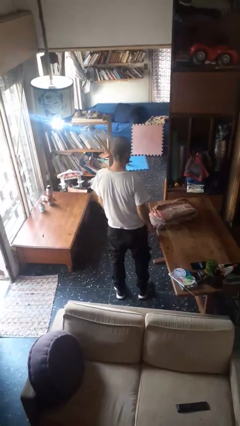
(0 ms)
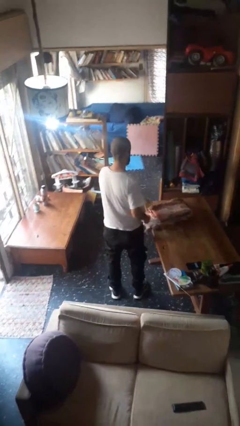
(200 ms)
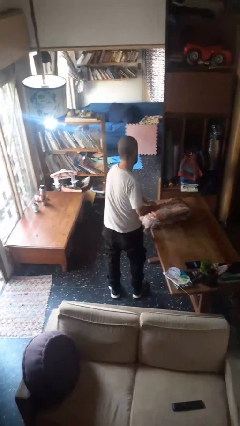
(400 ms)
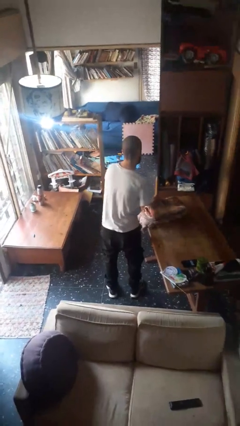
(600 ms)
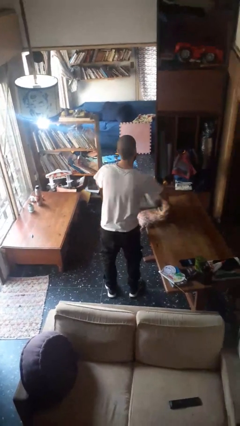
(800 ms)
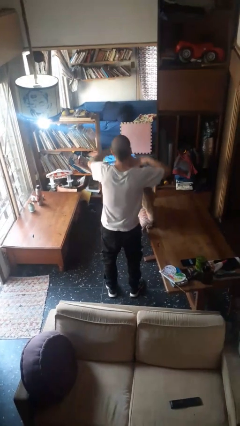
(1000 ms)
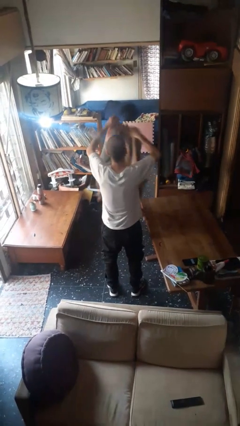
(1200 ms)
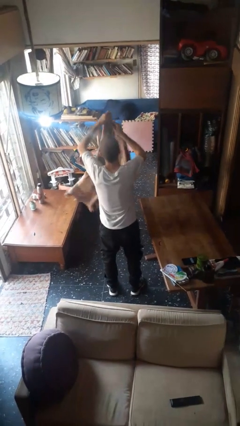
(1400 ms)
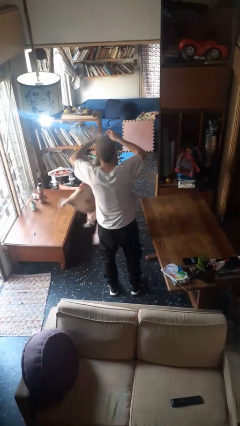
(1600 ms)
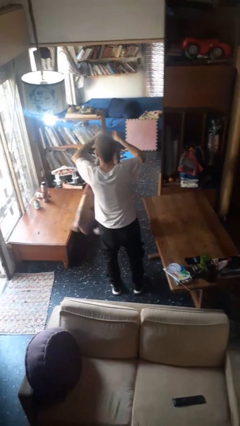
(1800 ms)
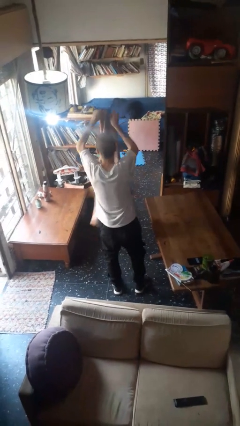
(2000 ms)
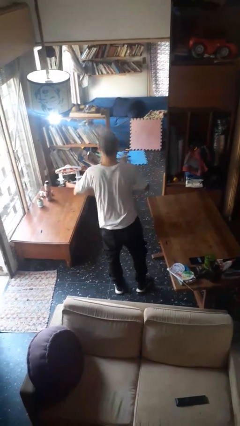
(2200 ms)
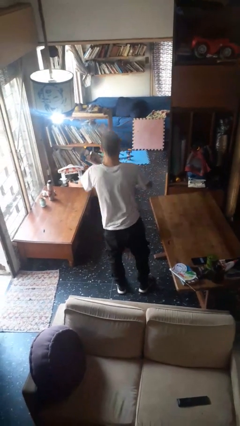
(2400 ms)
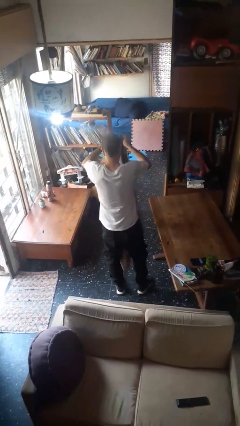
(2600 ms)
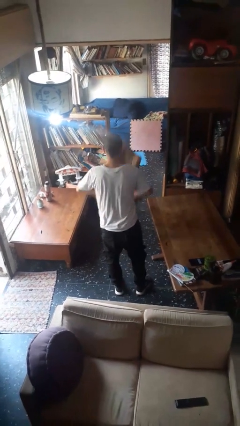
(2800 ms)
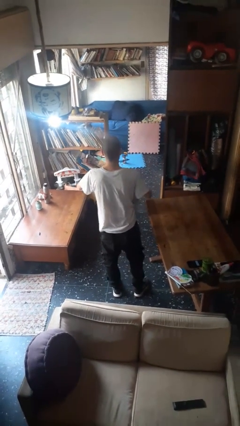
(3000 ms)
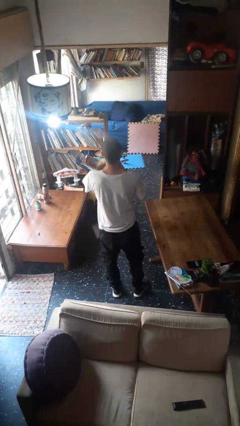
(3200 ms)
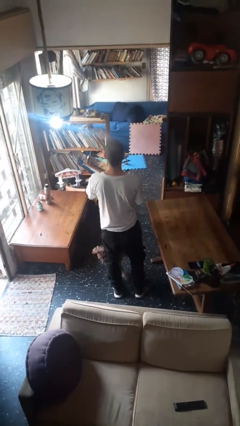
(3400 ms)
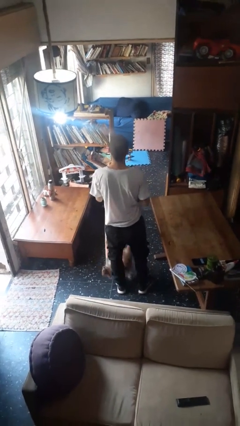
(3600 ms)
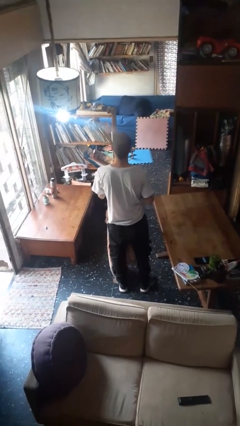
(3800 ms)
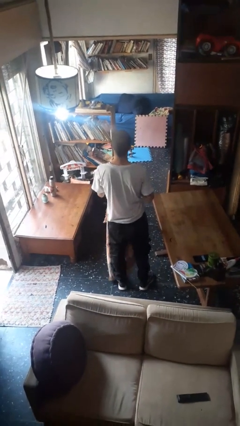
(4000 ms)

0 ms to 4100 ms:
person unfolds blanket

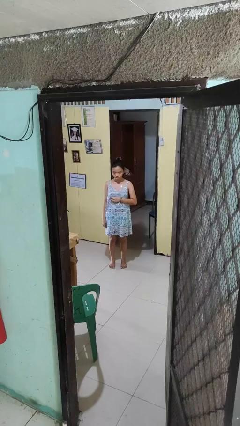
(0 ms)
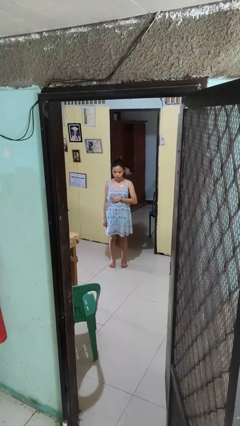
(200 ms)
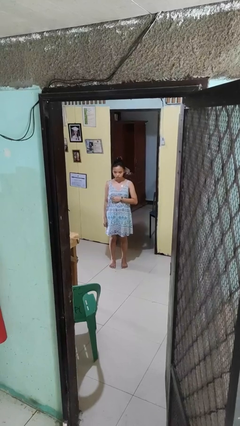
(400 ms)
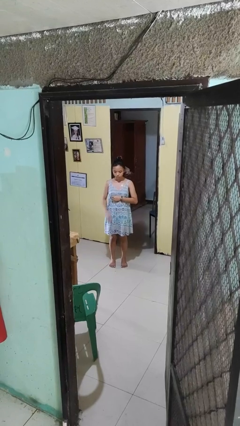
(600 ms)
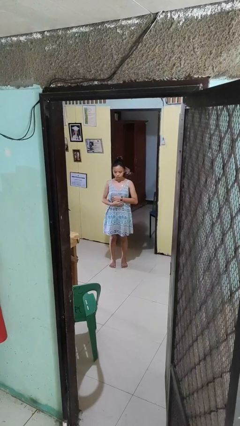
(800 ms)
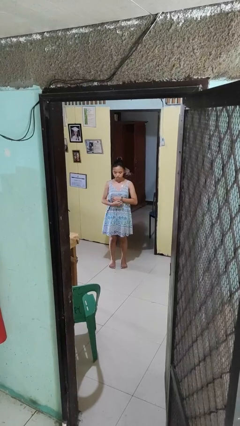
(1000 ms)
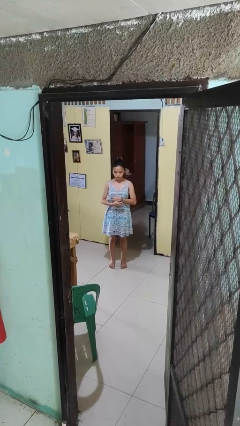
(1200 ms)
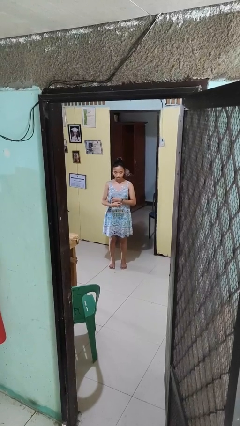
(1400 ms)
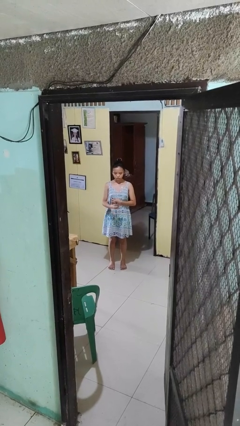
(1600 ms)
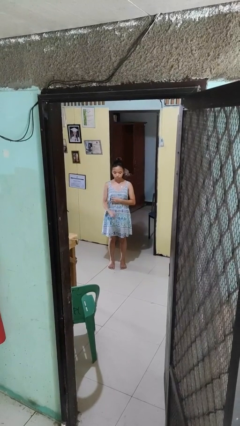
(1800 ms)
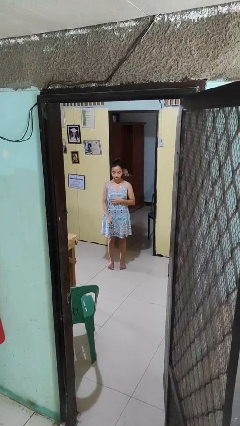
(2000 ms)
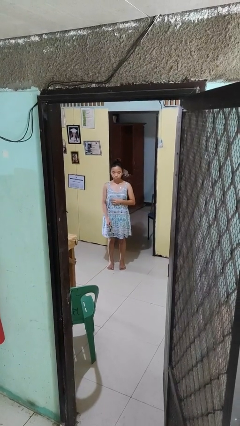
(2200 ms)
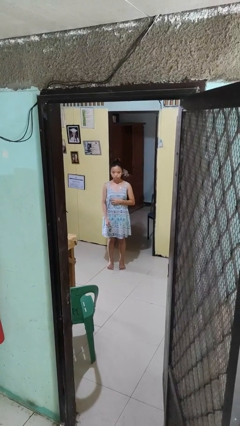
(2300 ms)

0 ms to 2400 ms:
person takes off wristwatch

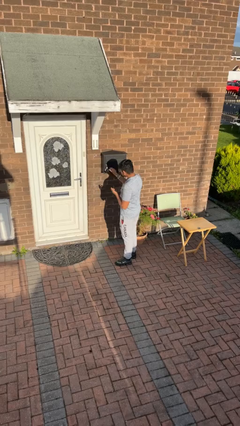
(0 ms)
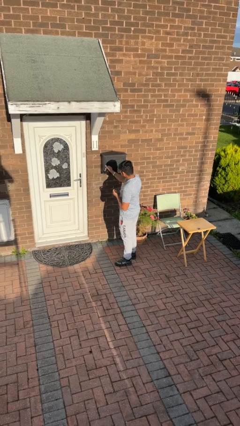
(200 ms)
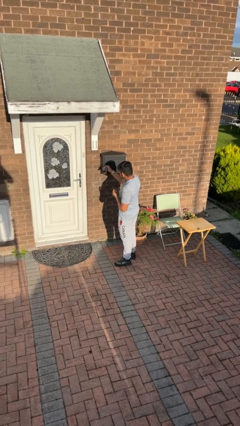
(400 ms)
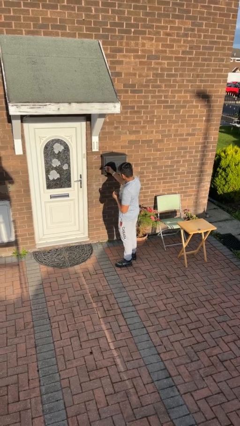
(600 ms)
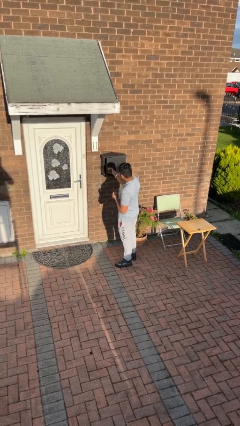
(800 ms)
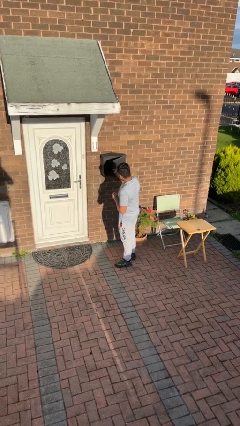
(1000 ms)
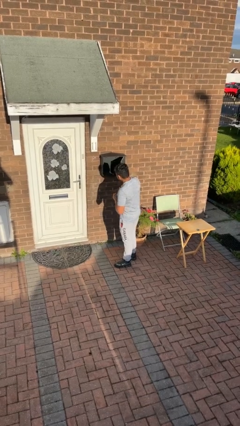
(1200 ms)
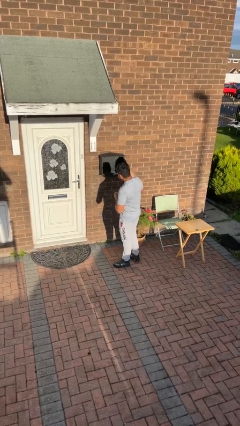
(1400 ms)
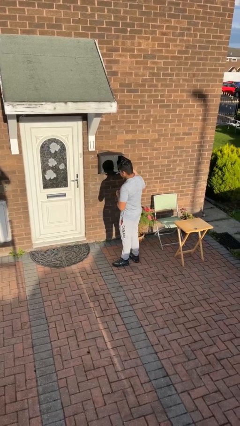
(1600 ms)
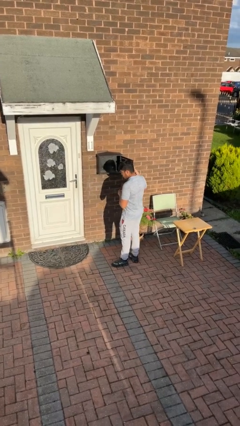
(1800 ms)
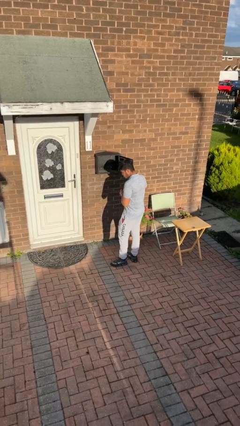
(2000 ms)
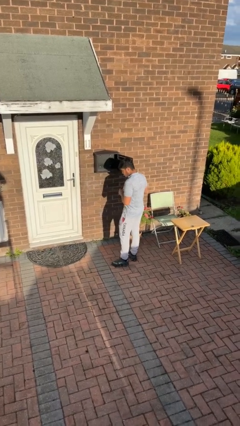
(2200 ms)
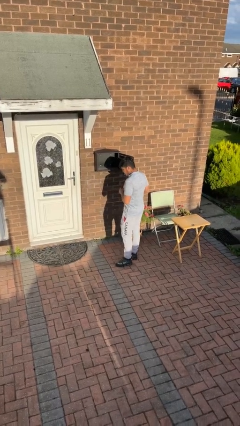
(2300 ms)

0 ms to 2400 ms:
person opens mailbox

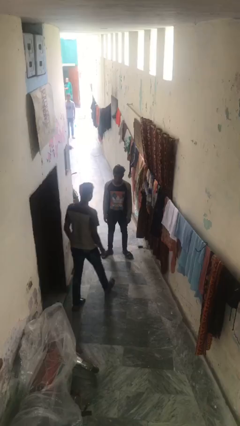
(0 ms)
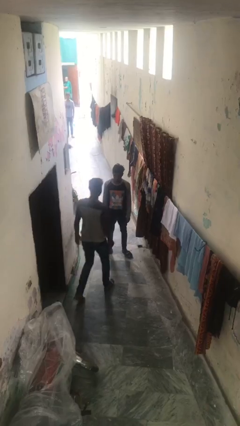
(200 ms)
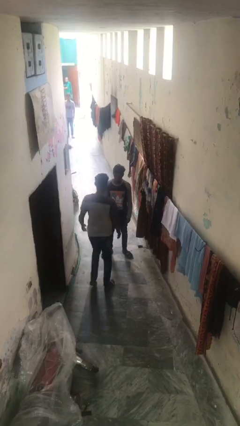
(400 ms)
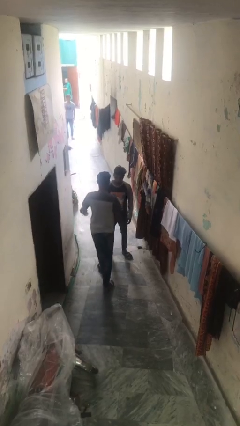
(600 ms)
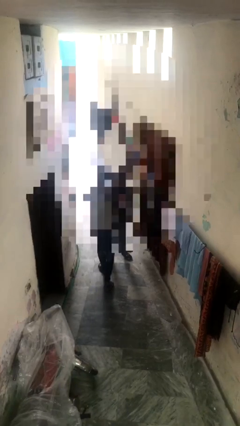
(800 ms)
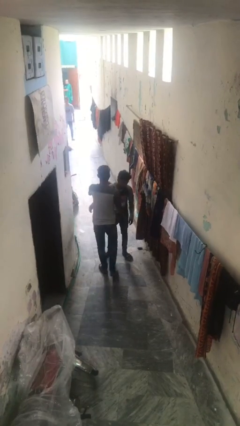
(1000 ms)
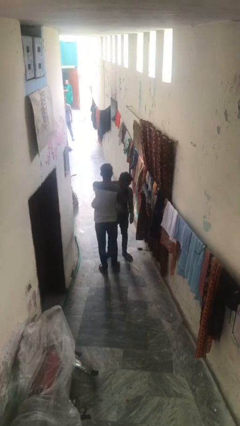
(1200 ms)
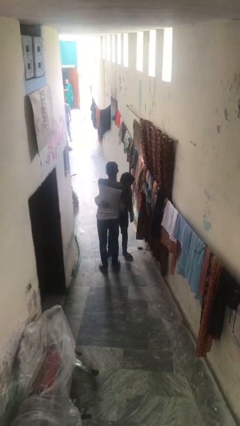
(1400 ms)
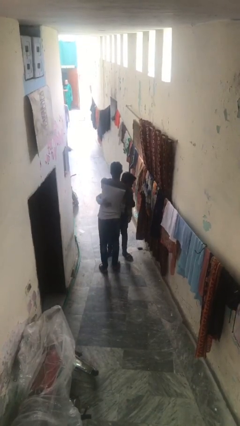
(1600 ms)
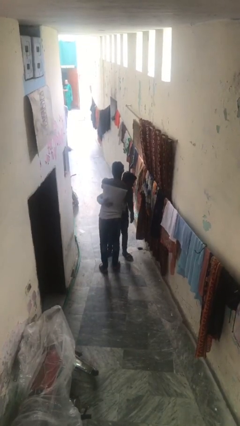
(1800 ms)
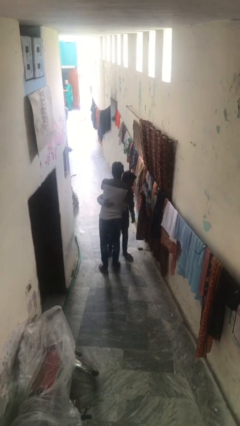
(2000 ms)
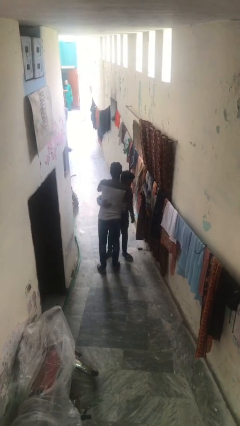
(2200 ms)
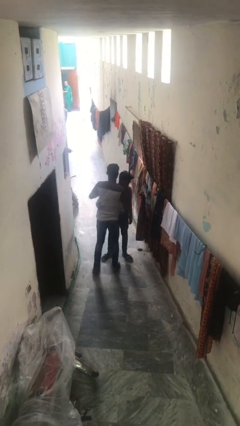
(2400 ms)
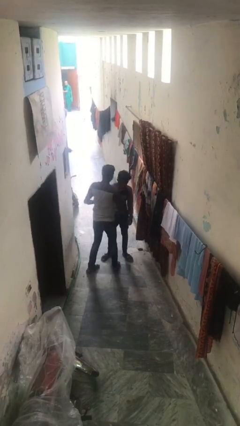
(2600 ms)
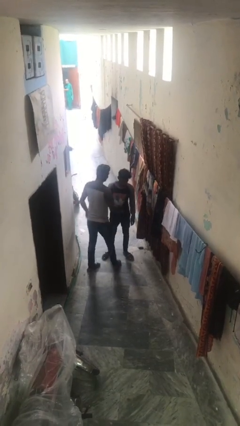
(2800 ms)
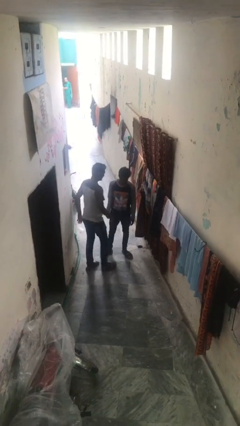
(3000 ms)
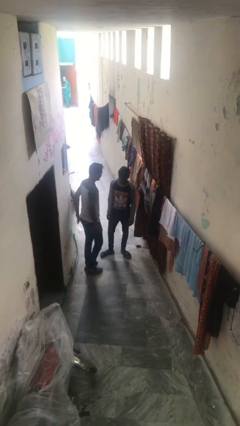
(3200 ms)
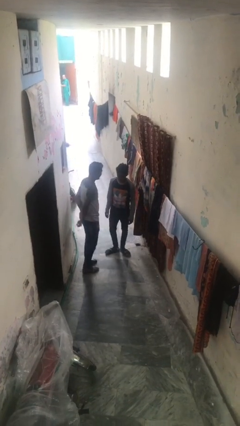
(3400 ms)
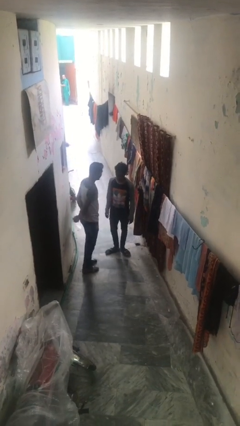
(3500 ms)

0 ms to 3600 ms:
person embraces person

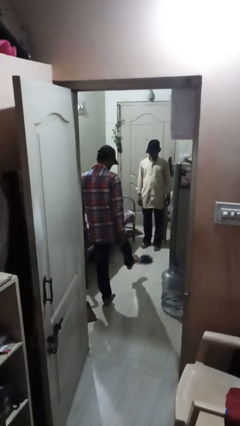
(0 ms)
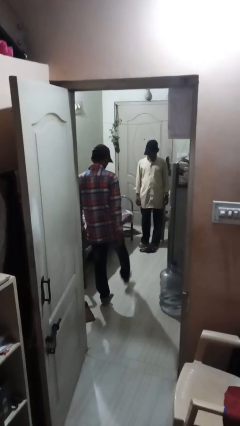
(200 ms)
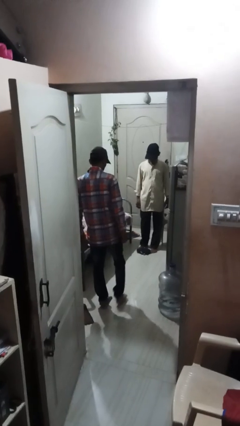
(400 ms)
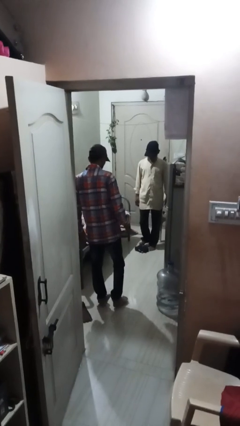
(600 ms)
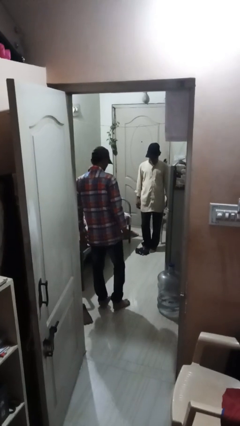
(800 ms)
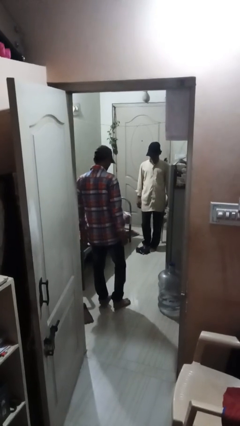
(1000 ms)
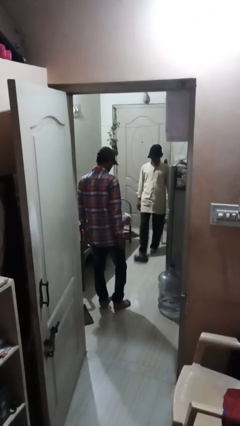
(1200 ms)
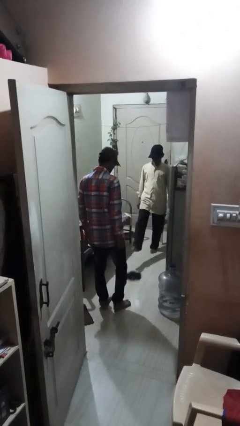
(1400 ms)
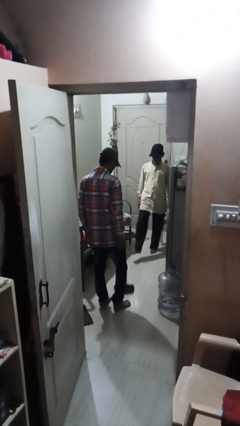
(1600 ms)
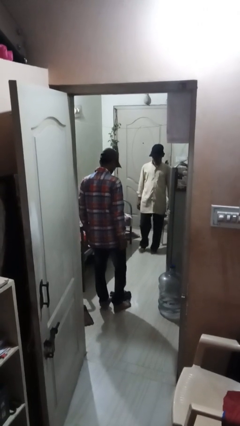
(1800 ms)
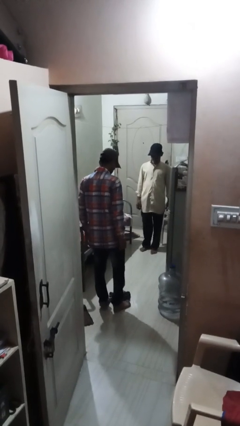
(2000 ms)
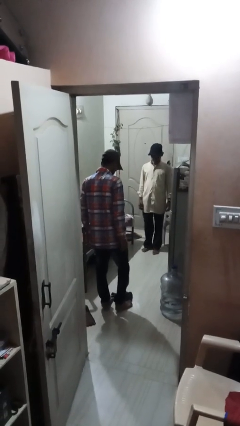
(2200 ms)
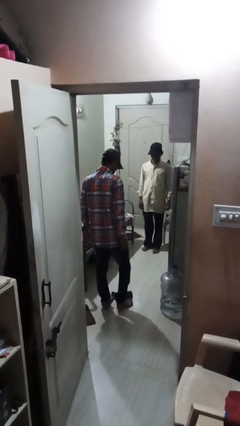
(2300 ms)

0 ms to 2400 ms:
person kicks object to person

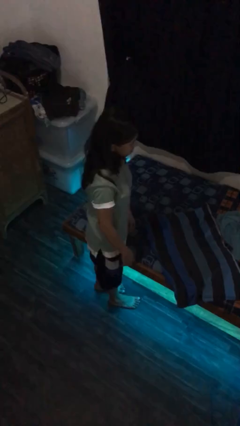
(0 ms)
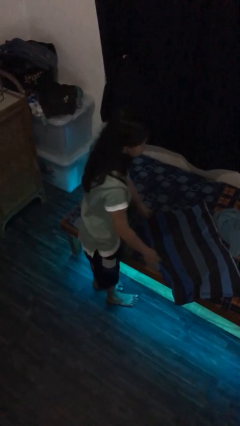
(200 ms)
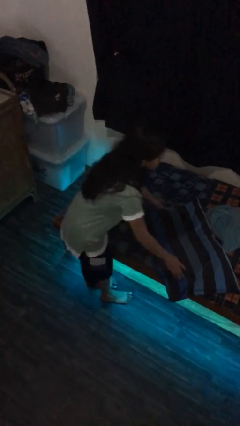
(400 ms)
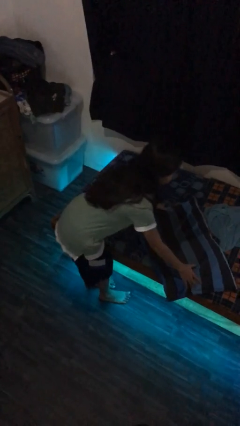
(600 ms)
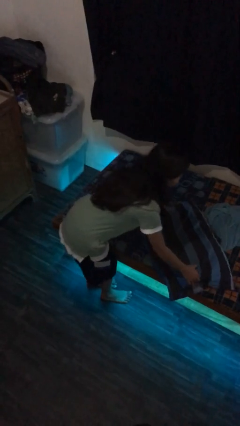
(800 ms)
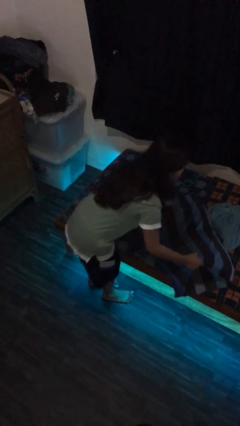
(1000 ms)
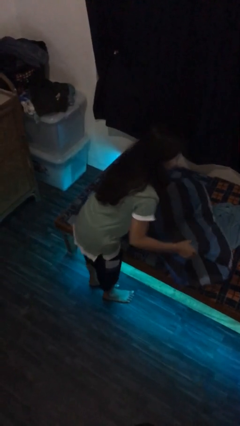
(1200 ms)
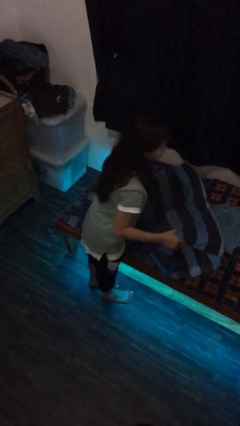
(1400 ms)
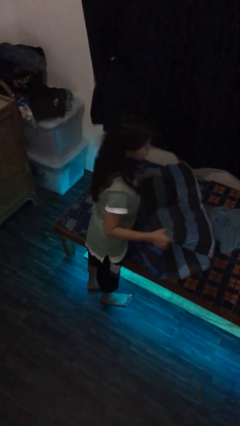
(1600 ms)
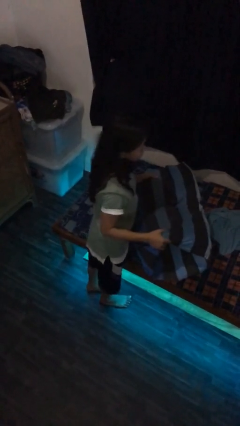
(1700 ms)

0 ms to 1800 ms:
person picks up object from bed

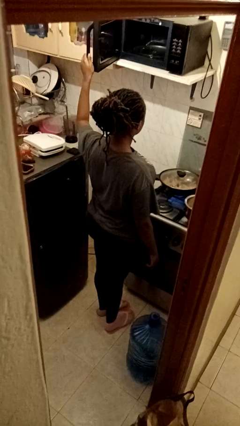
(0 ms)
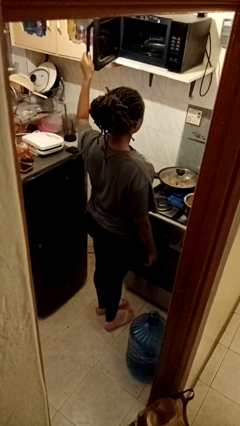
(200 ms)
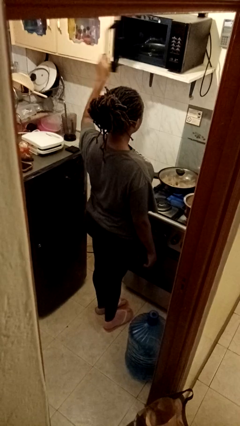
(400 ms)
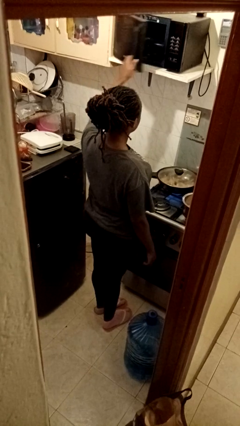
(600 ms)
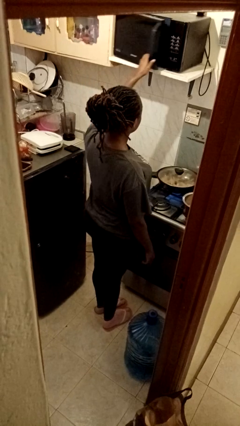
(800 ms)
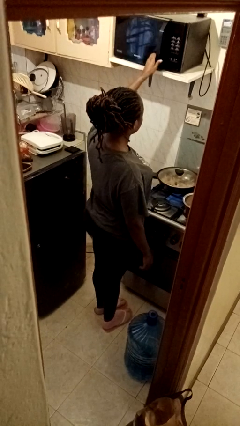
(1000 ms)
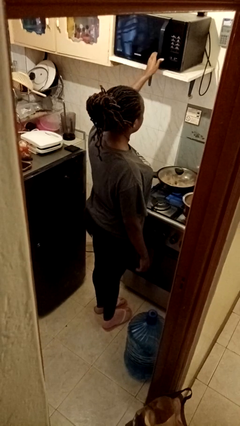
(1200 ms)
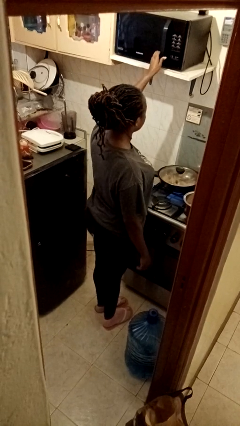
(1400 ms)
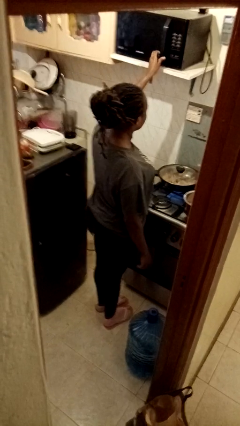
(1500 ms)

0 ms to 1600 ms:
person closes microwave
